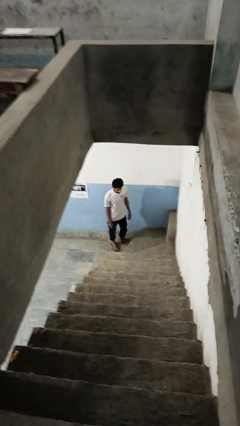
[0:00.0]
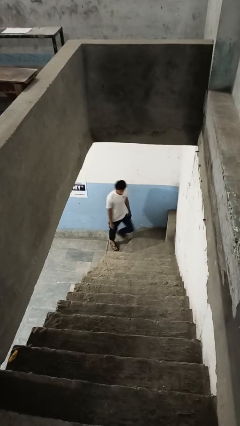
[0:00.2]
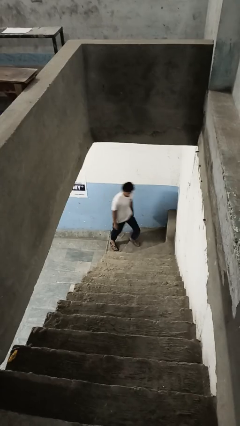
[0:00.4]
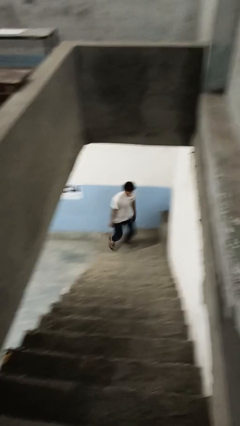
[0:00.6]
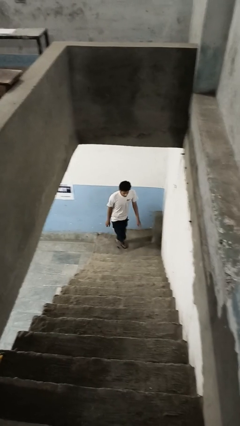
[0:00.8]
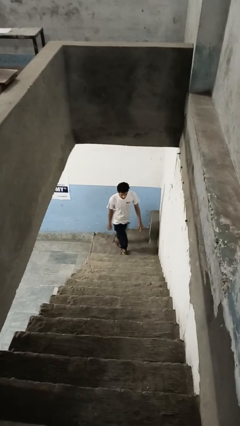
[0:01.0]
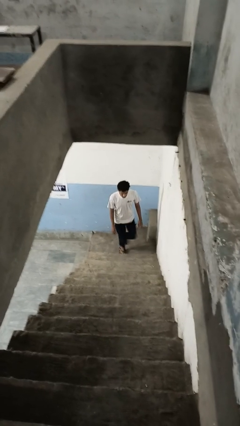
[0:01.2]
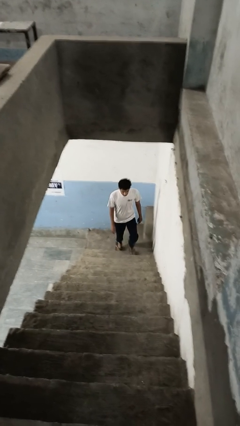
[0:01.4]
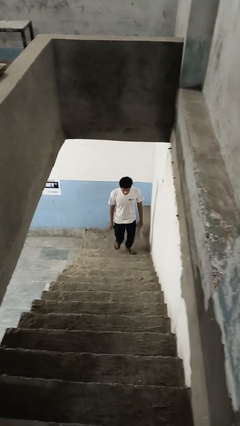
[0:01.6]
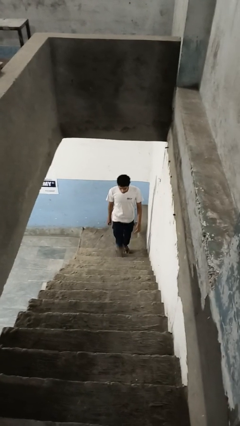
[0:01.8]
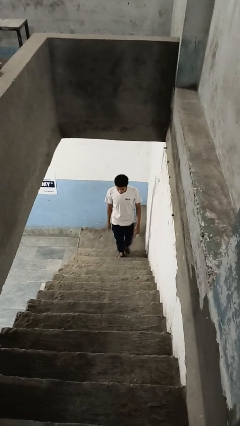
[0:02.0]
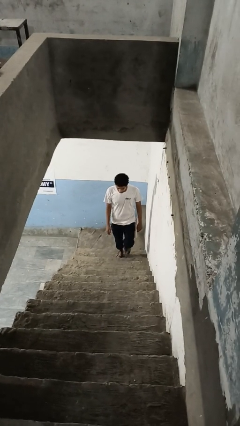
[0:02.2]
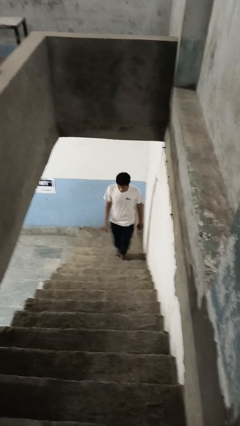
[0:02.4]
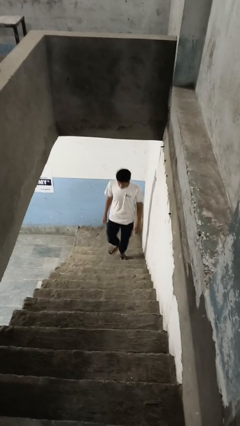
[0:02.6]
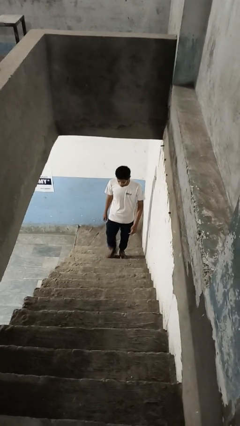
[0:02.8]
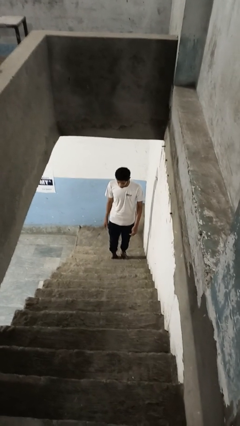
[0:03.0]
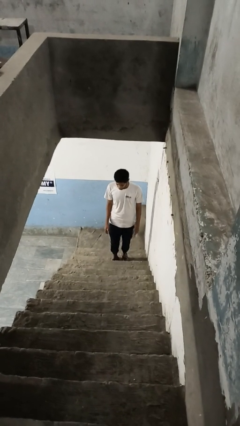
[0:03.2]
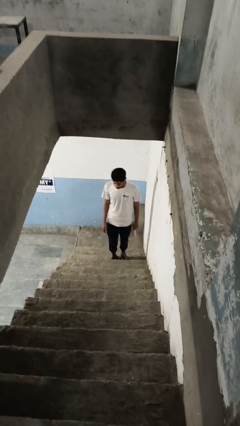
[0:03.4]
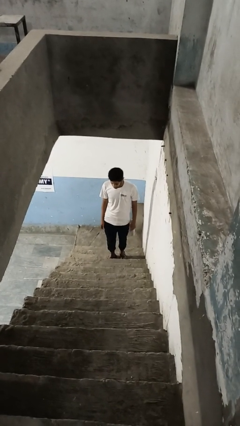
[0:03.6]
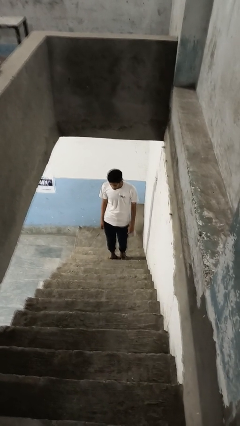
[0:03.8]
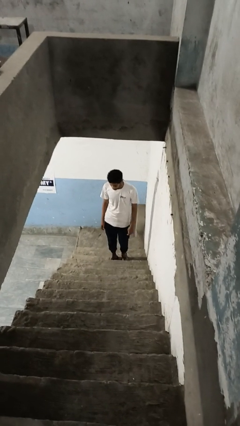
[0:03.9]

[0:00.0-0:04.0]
person climbs up stairs

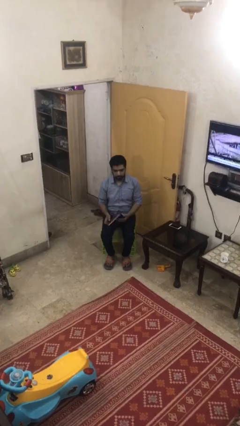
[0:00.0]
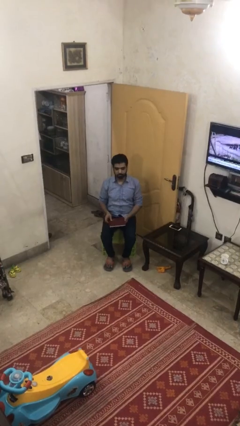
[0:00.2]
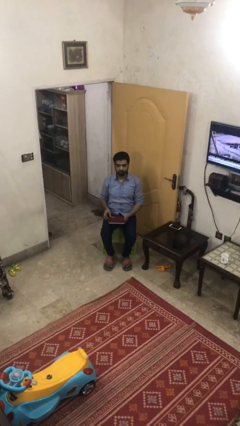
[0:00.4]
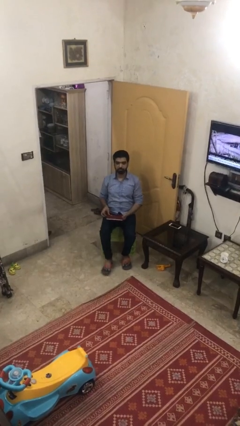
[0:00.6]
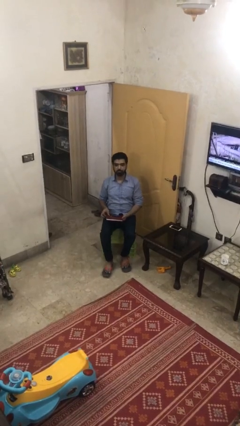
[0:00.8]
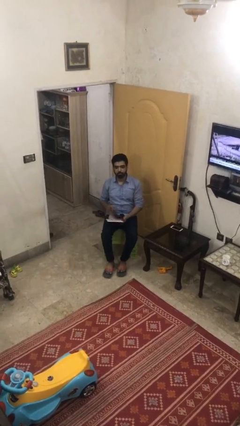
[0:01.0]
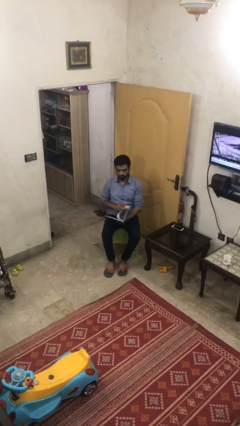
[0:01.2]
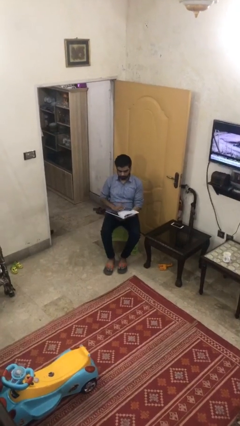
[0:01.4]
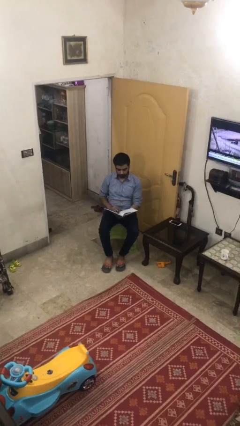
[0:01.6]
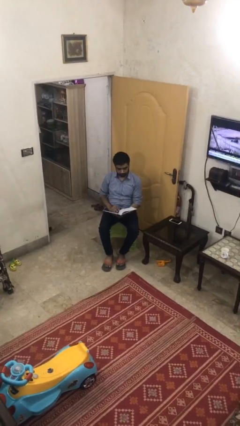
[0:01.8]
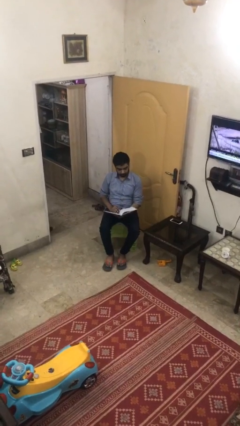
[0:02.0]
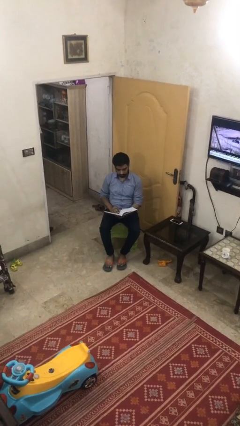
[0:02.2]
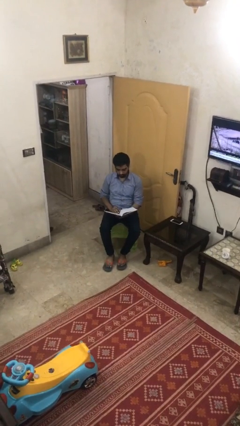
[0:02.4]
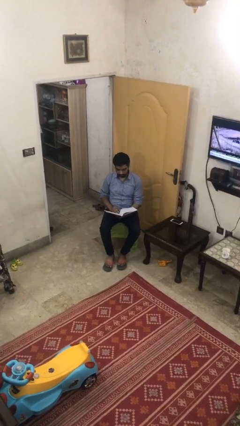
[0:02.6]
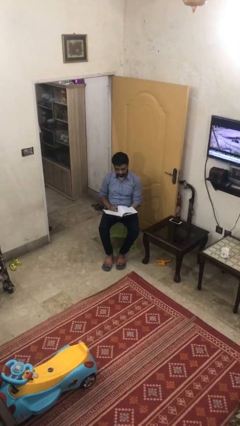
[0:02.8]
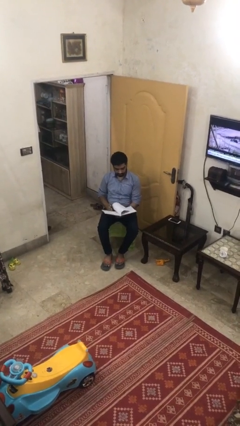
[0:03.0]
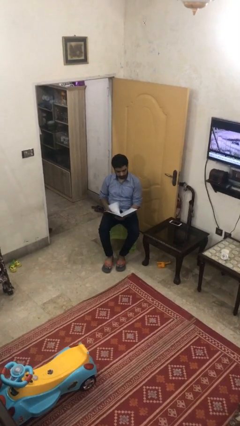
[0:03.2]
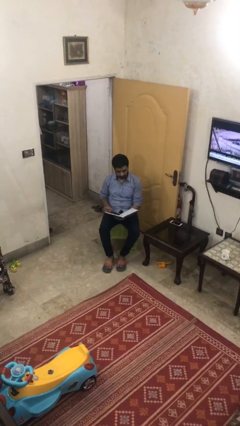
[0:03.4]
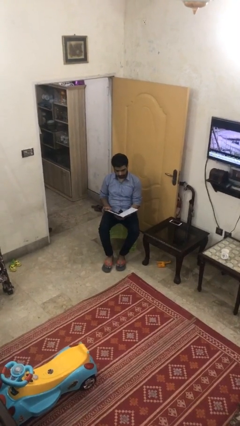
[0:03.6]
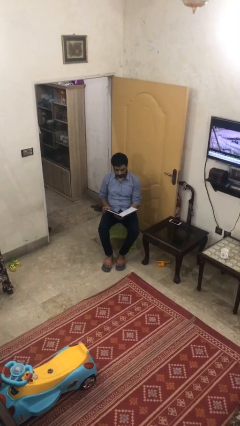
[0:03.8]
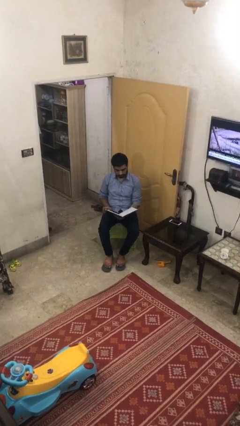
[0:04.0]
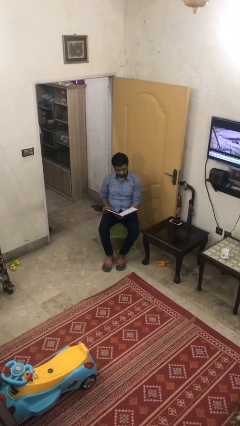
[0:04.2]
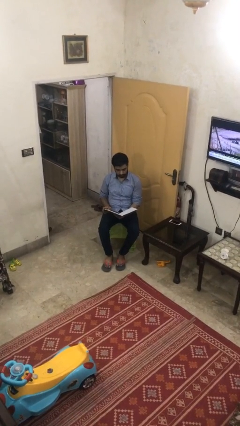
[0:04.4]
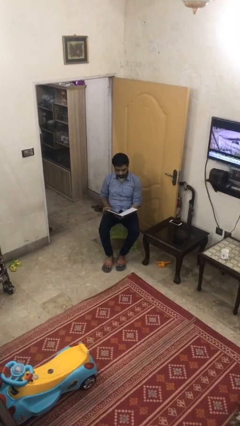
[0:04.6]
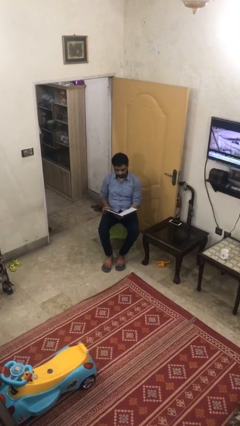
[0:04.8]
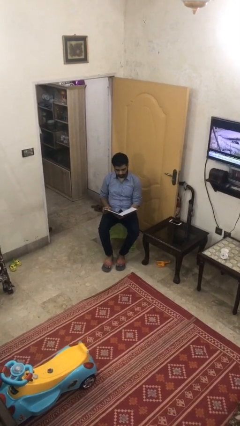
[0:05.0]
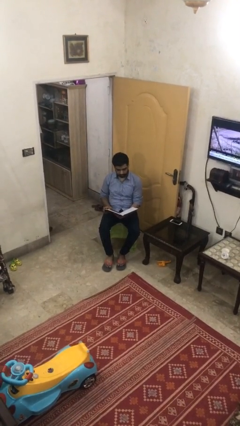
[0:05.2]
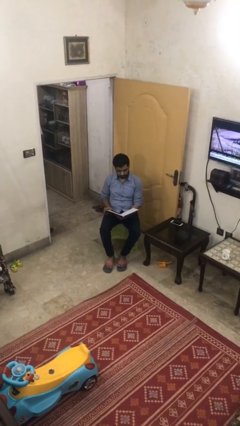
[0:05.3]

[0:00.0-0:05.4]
person reads document

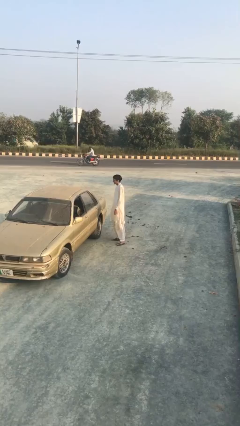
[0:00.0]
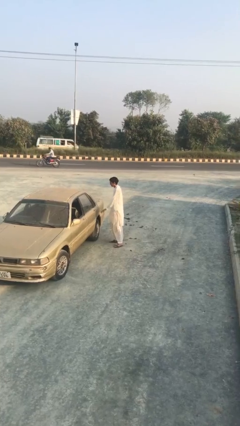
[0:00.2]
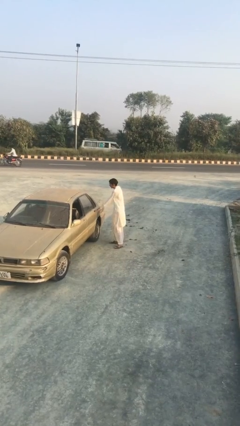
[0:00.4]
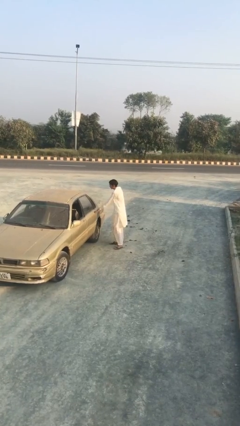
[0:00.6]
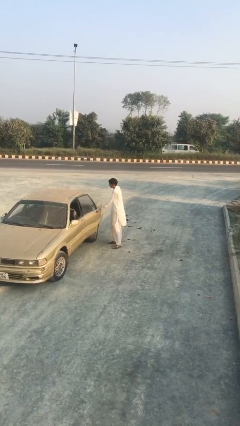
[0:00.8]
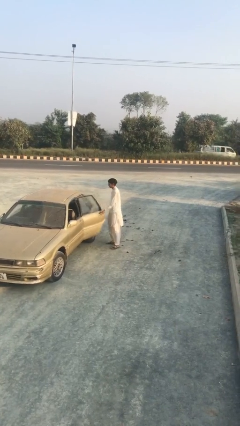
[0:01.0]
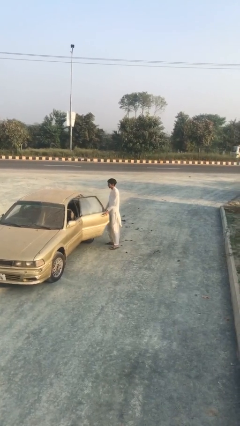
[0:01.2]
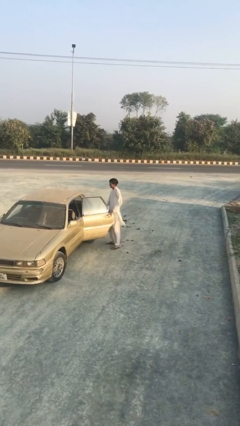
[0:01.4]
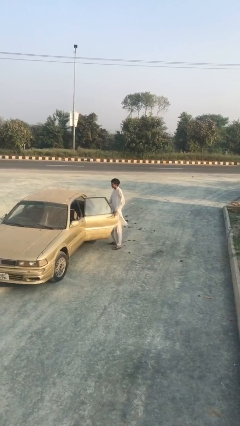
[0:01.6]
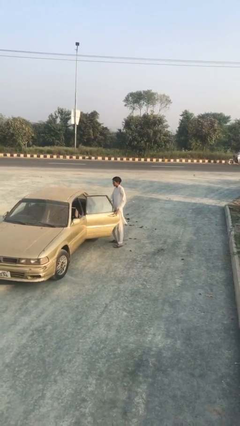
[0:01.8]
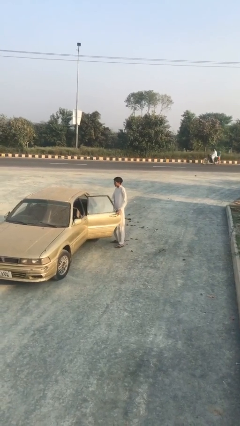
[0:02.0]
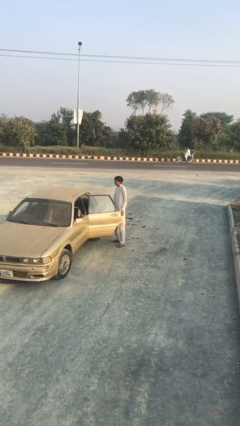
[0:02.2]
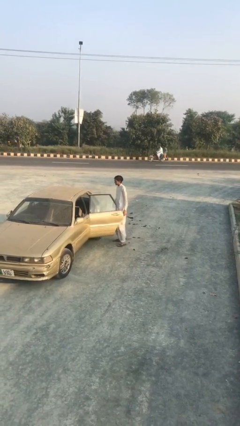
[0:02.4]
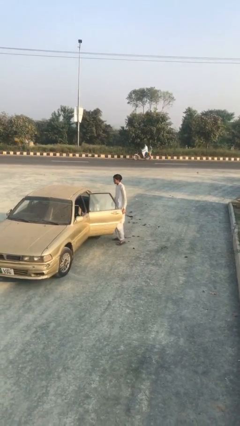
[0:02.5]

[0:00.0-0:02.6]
person opens car door

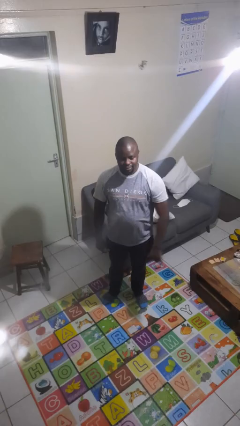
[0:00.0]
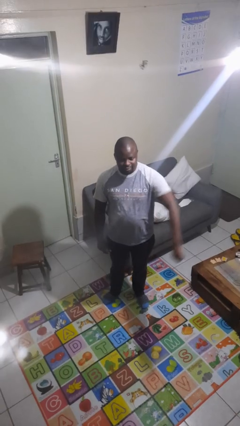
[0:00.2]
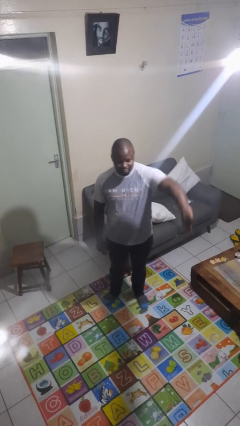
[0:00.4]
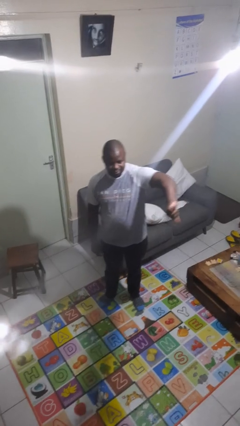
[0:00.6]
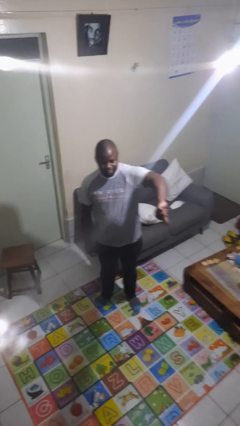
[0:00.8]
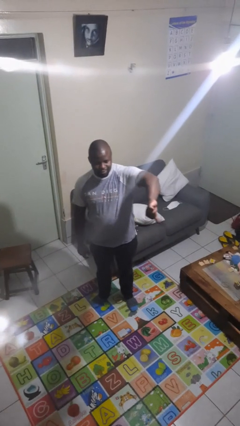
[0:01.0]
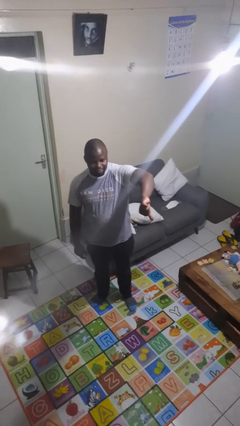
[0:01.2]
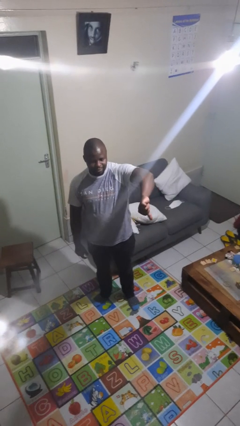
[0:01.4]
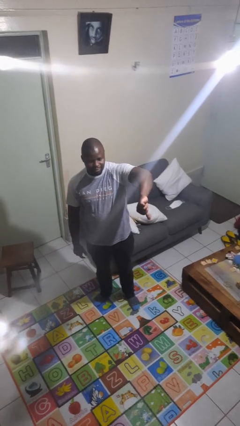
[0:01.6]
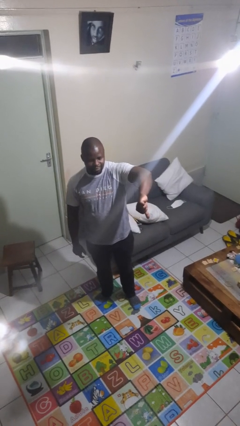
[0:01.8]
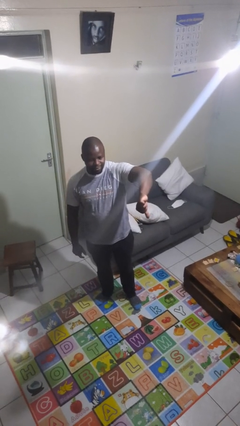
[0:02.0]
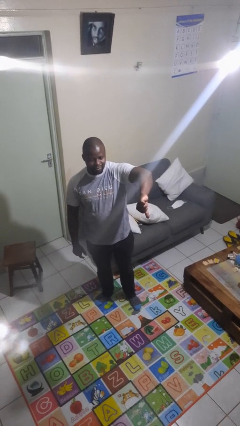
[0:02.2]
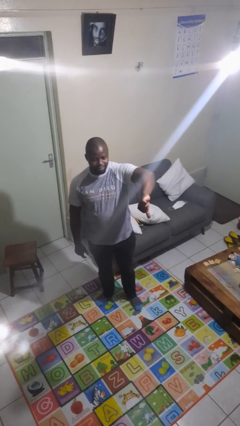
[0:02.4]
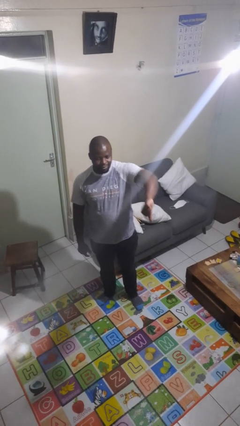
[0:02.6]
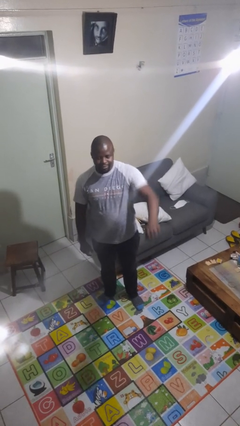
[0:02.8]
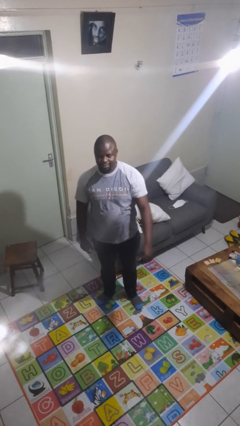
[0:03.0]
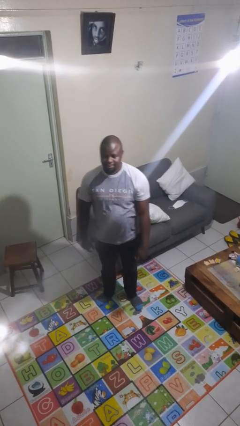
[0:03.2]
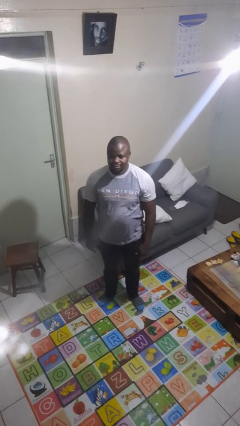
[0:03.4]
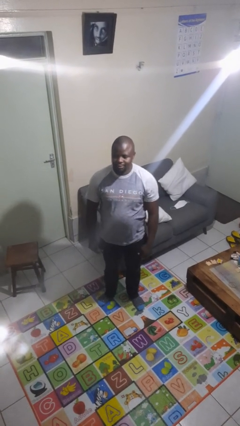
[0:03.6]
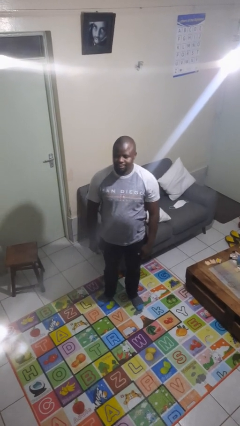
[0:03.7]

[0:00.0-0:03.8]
person gestures thumbs down

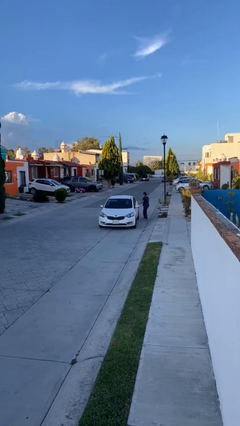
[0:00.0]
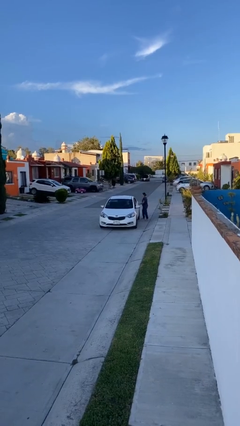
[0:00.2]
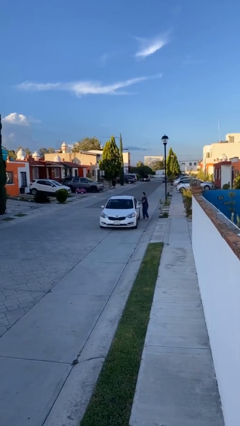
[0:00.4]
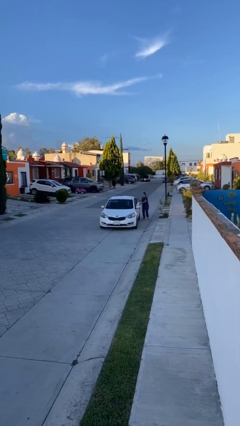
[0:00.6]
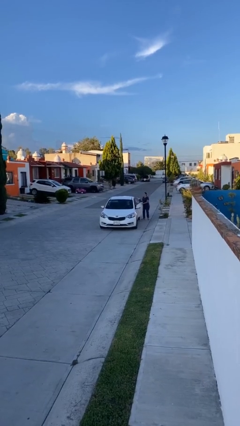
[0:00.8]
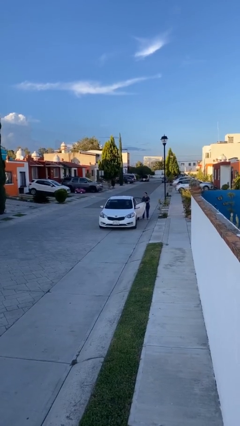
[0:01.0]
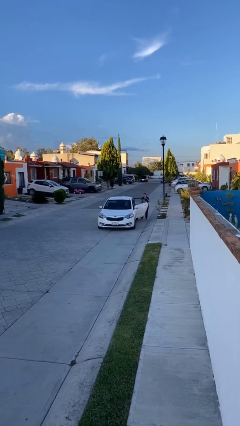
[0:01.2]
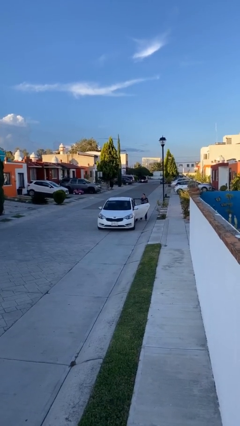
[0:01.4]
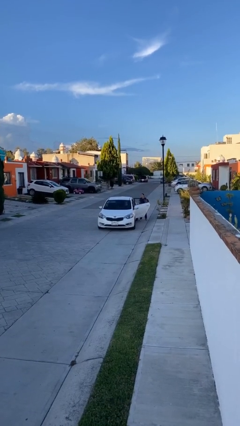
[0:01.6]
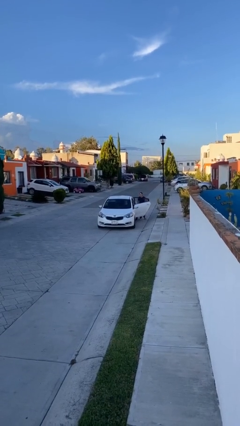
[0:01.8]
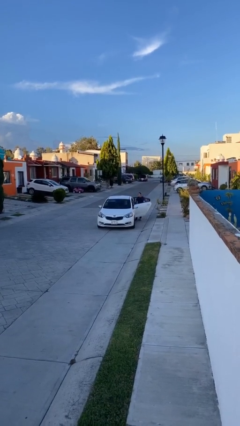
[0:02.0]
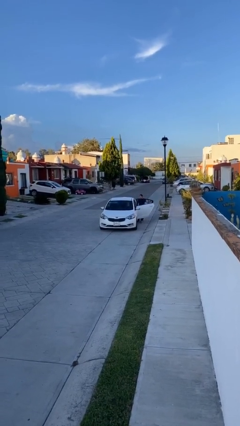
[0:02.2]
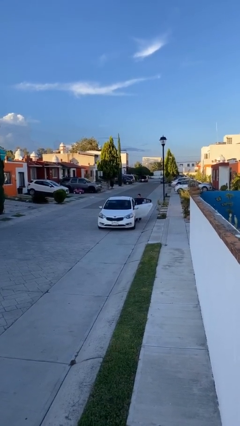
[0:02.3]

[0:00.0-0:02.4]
car picks up person
